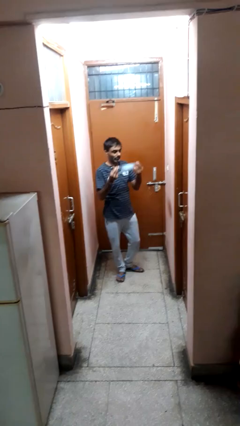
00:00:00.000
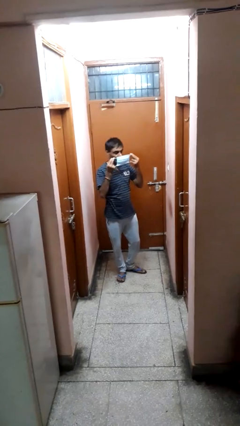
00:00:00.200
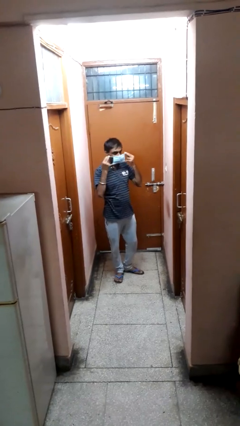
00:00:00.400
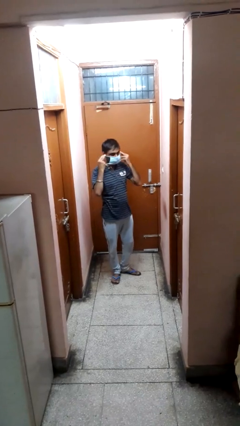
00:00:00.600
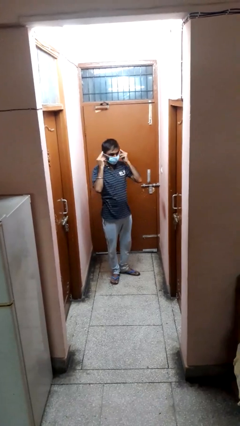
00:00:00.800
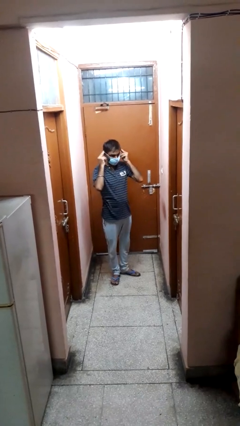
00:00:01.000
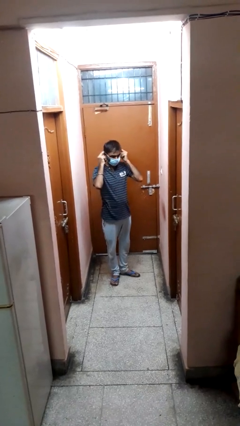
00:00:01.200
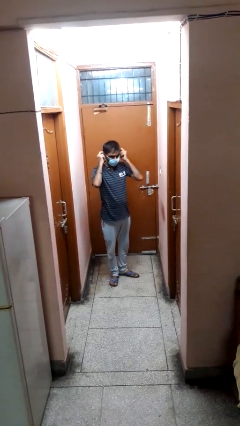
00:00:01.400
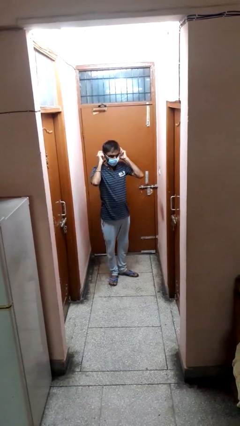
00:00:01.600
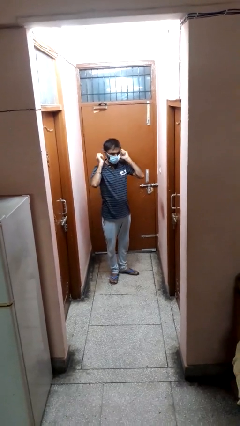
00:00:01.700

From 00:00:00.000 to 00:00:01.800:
person puts on facemask

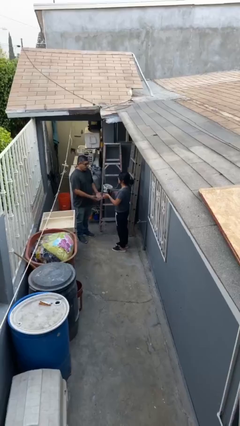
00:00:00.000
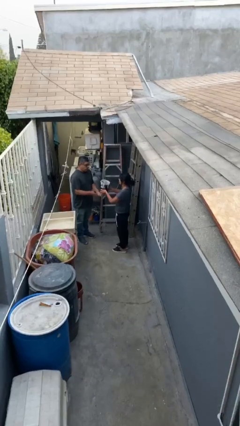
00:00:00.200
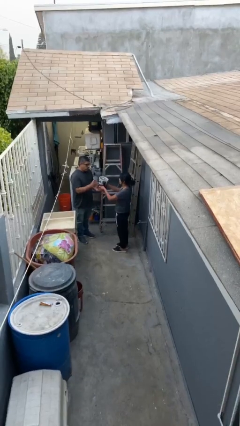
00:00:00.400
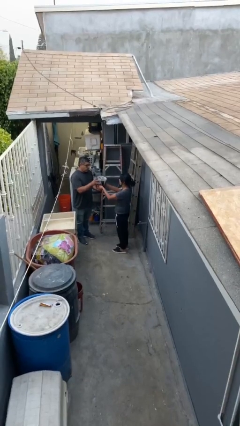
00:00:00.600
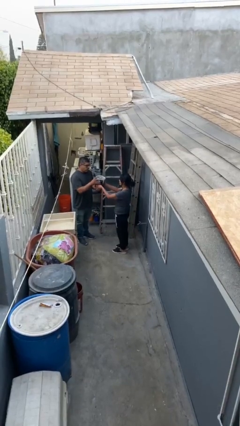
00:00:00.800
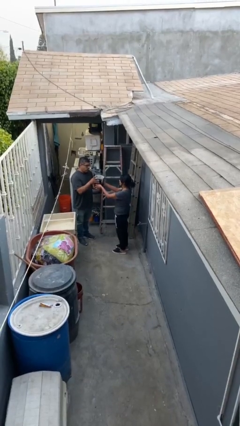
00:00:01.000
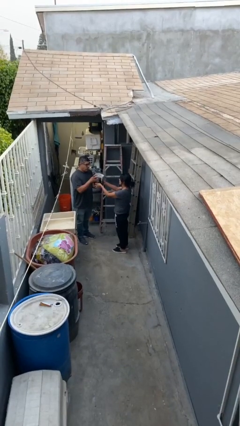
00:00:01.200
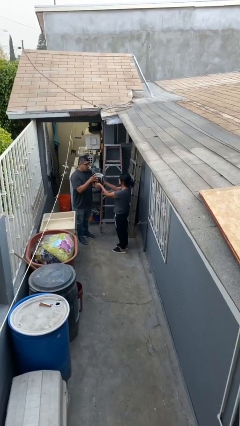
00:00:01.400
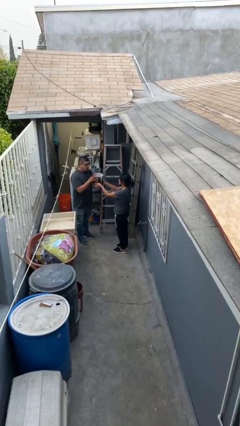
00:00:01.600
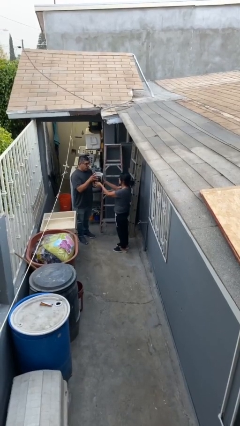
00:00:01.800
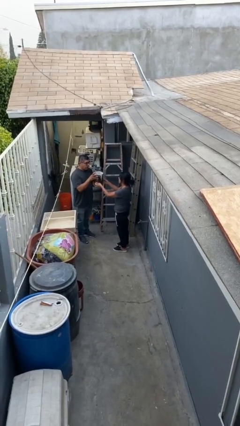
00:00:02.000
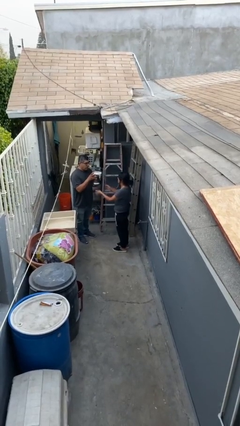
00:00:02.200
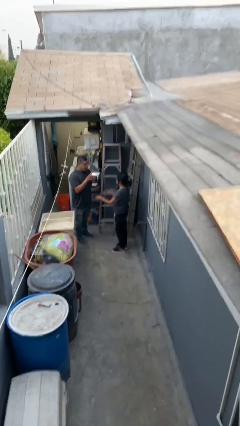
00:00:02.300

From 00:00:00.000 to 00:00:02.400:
person transfers object to person

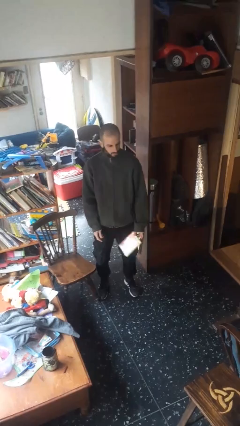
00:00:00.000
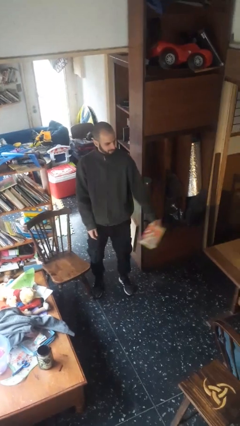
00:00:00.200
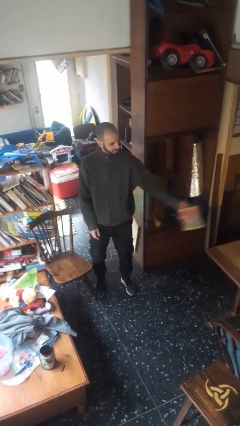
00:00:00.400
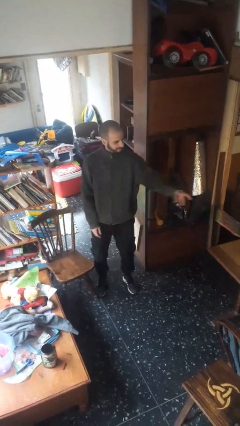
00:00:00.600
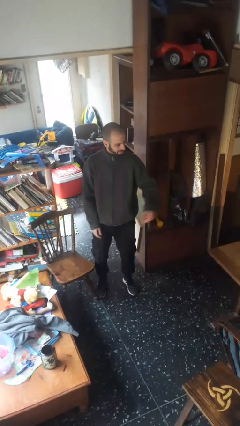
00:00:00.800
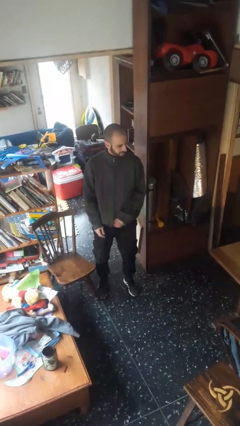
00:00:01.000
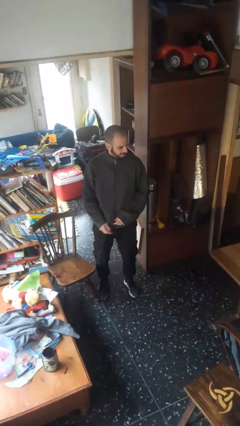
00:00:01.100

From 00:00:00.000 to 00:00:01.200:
person throws object on table

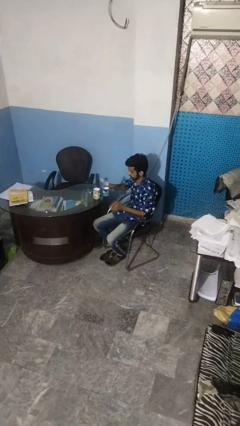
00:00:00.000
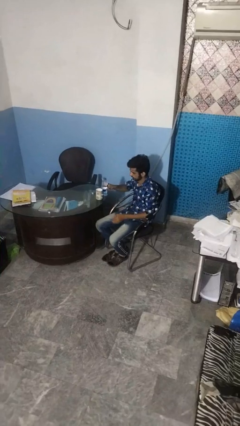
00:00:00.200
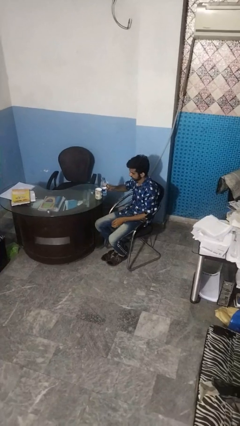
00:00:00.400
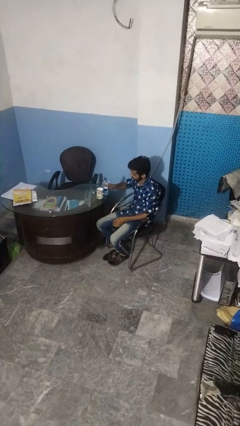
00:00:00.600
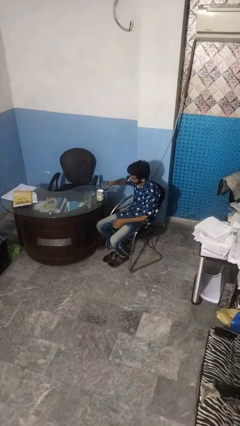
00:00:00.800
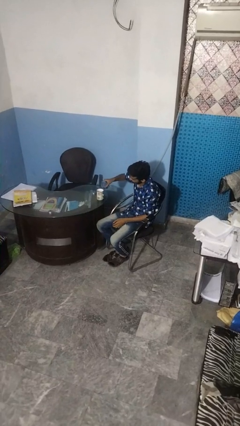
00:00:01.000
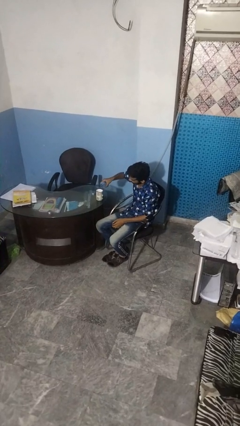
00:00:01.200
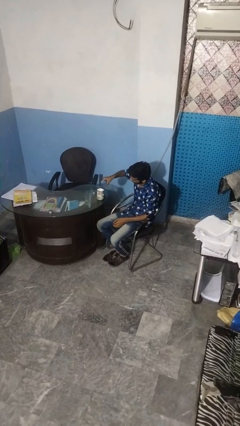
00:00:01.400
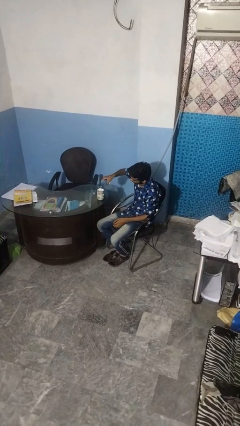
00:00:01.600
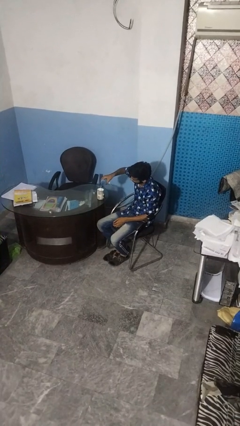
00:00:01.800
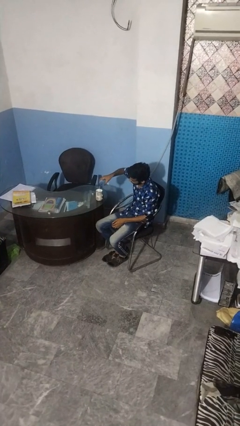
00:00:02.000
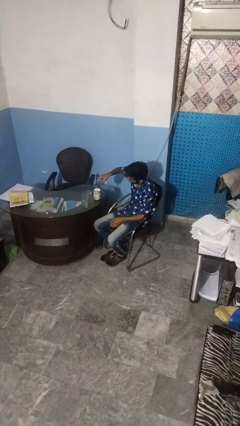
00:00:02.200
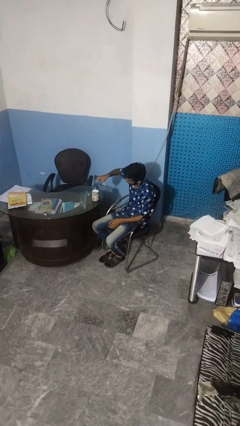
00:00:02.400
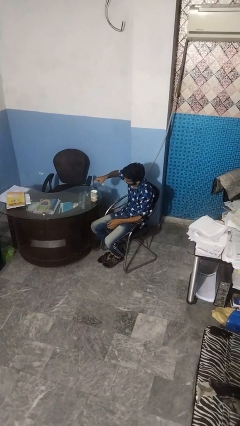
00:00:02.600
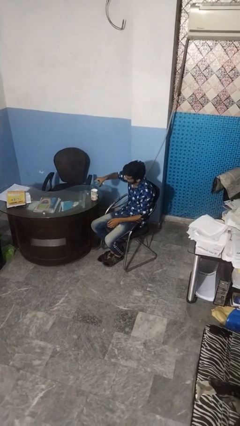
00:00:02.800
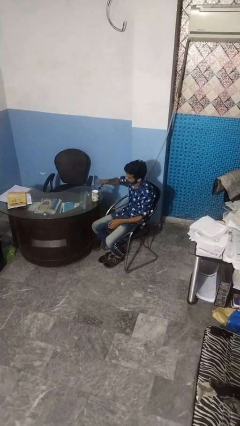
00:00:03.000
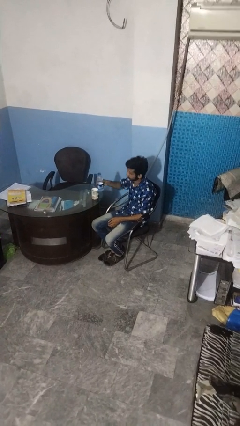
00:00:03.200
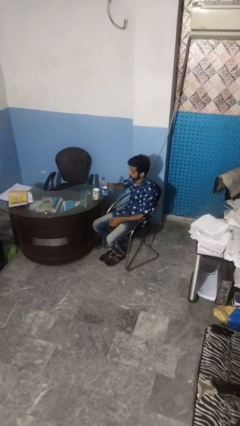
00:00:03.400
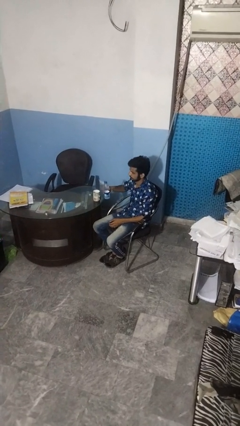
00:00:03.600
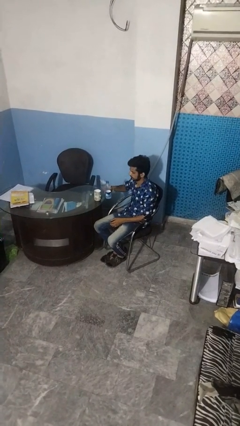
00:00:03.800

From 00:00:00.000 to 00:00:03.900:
person pours liquid into cup

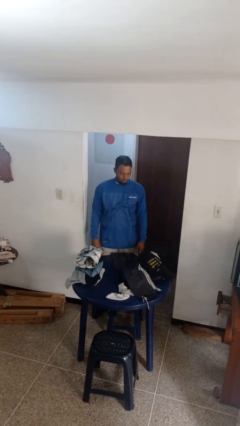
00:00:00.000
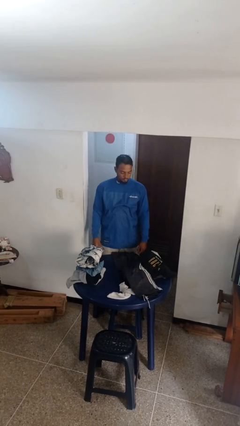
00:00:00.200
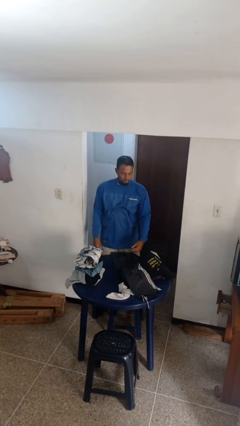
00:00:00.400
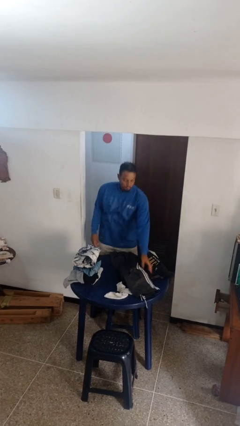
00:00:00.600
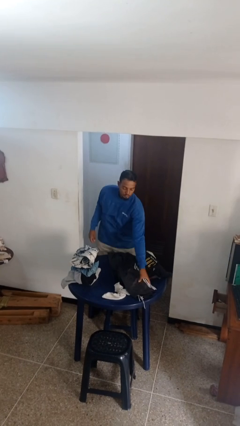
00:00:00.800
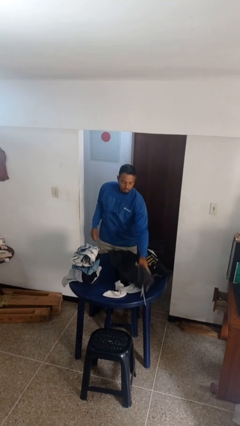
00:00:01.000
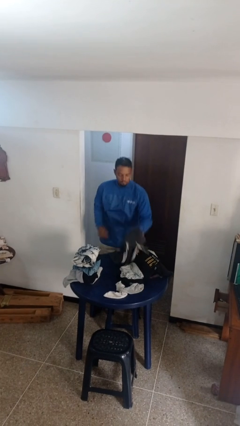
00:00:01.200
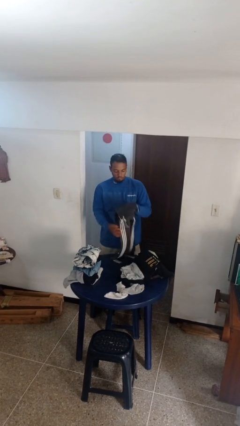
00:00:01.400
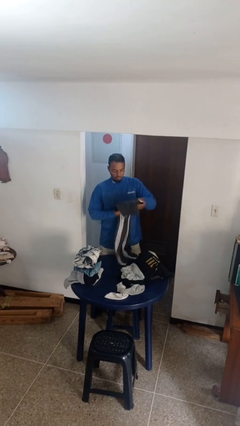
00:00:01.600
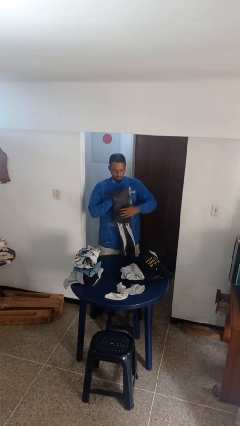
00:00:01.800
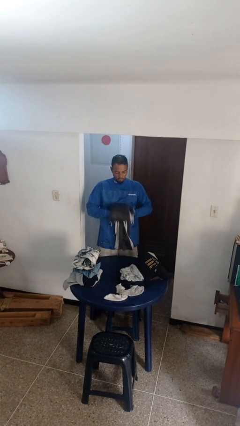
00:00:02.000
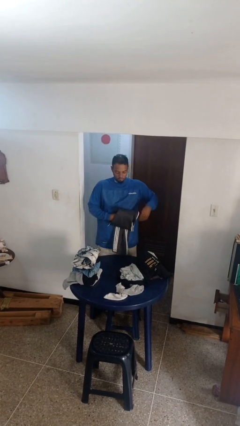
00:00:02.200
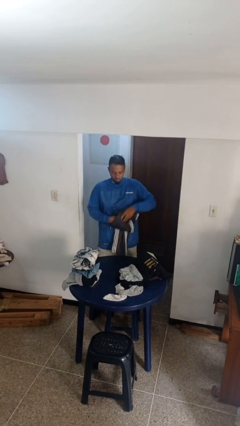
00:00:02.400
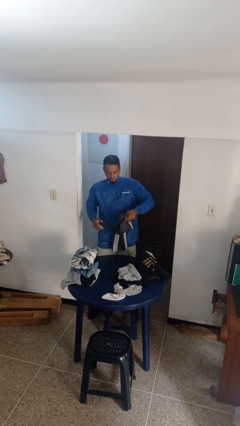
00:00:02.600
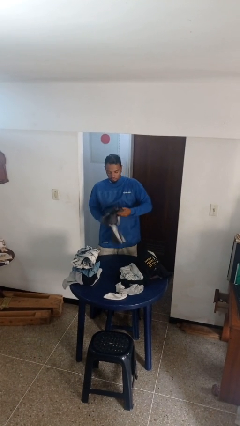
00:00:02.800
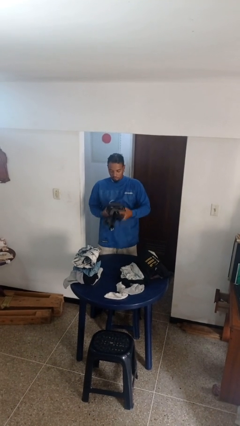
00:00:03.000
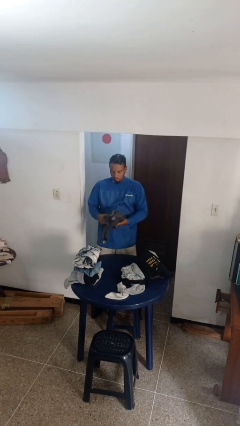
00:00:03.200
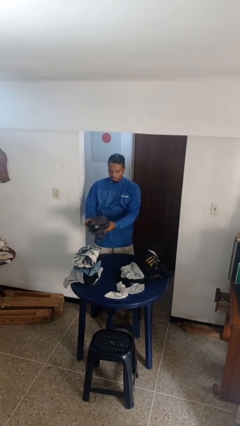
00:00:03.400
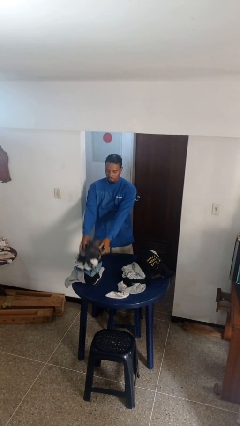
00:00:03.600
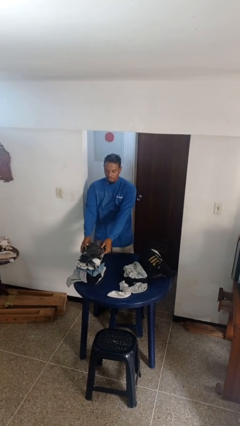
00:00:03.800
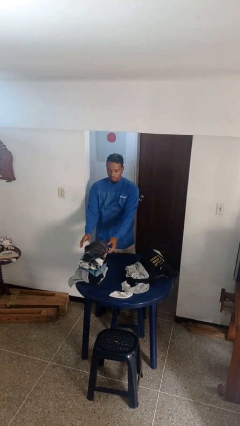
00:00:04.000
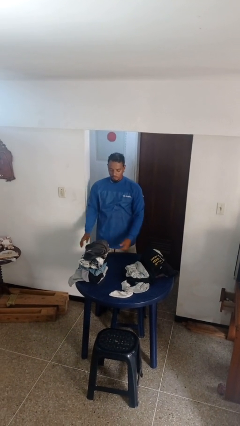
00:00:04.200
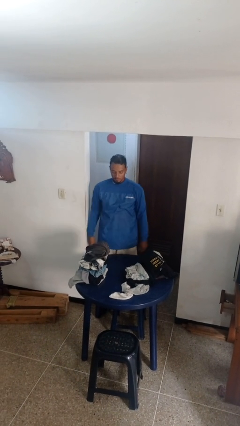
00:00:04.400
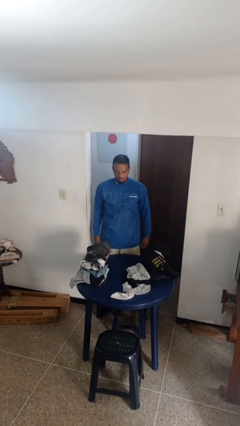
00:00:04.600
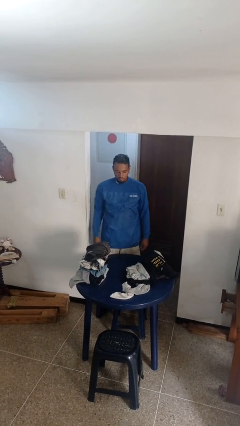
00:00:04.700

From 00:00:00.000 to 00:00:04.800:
person folds pants

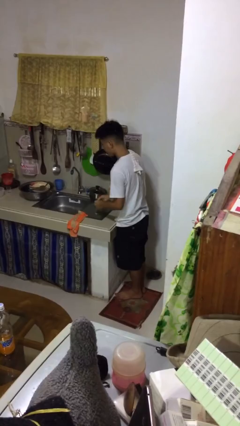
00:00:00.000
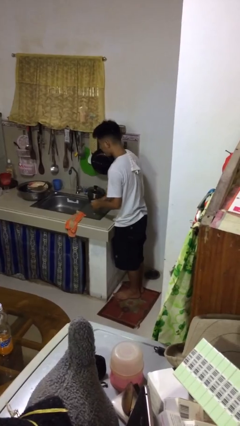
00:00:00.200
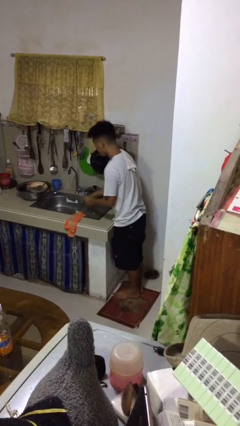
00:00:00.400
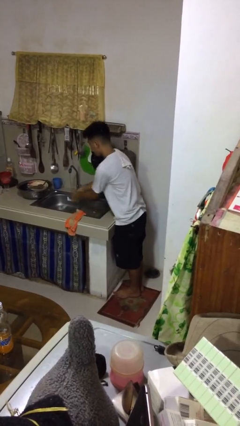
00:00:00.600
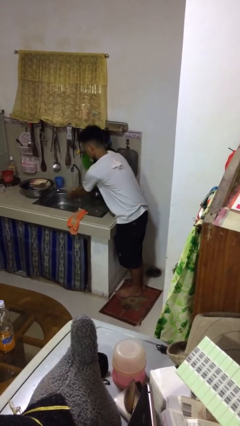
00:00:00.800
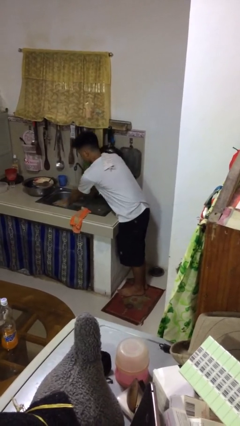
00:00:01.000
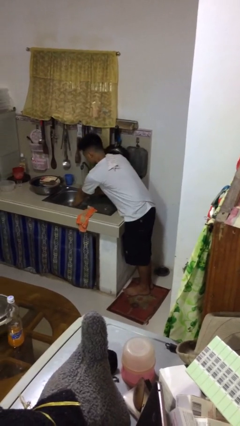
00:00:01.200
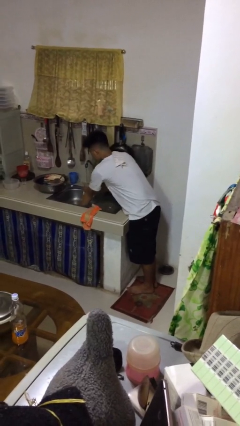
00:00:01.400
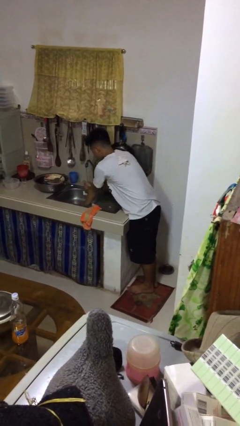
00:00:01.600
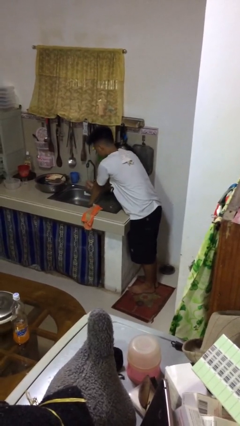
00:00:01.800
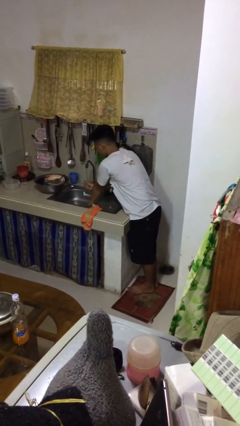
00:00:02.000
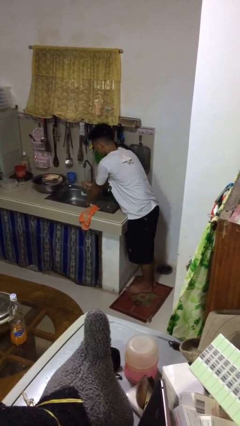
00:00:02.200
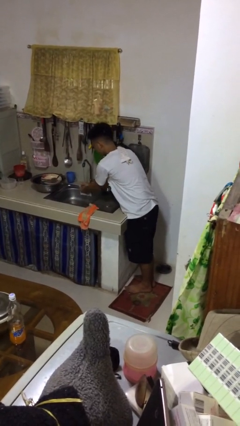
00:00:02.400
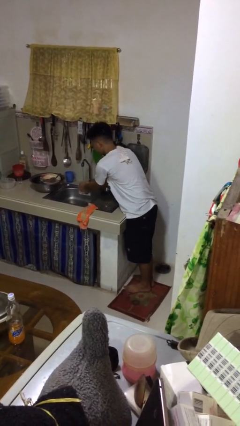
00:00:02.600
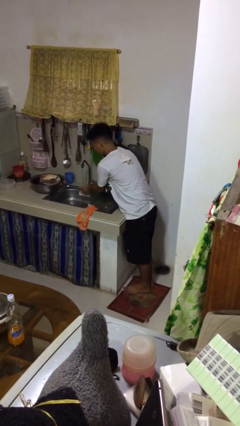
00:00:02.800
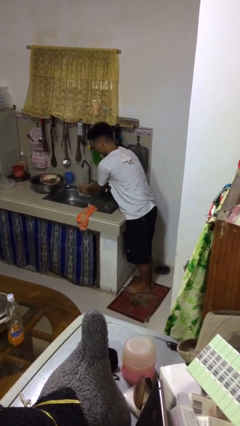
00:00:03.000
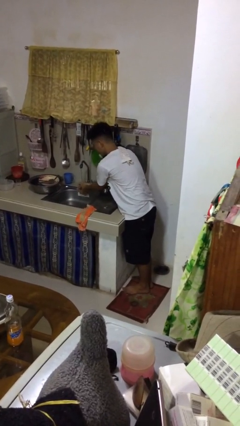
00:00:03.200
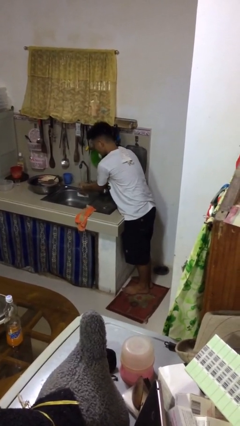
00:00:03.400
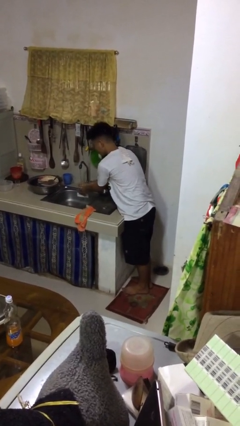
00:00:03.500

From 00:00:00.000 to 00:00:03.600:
person washes hands
